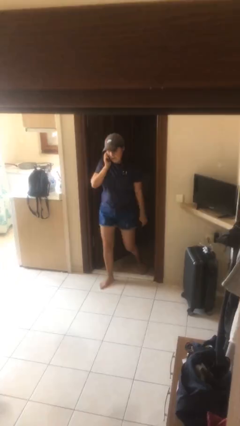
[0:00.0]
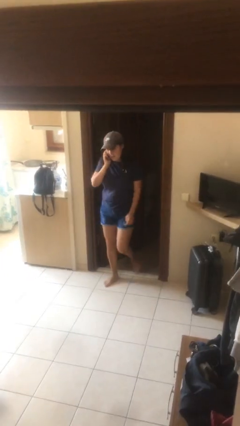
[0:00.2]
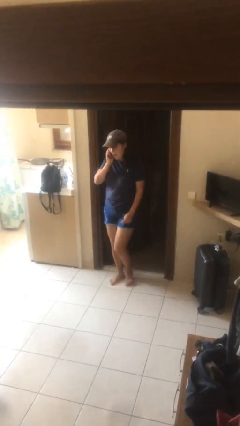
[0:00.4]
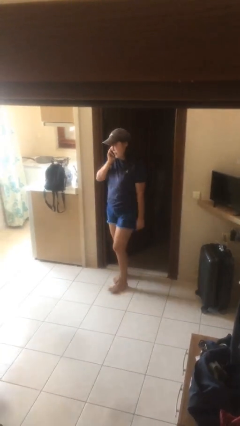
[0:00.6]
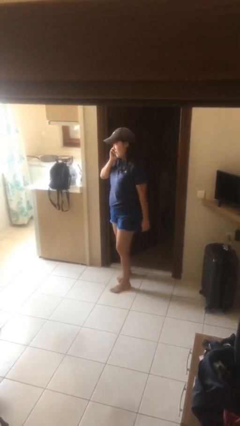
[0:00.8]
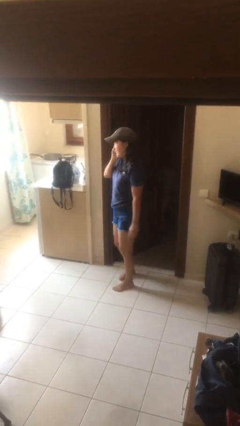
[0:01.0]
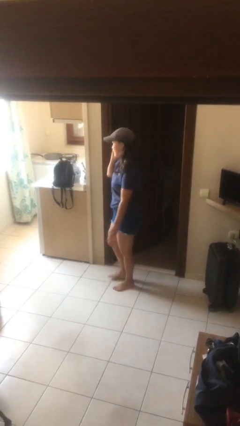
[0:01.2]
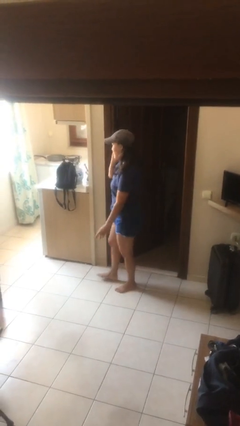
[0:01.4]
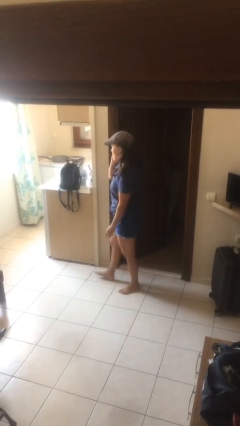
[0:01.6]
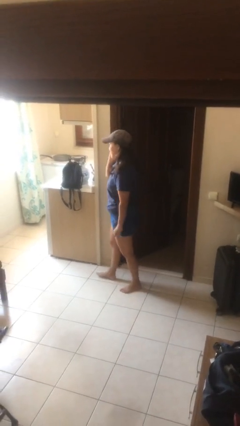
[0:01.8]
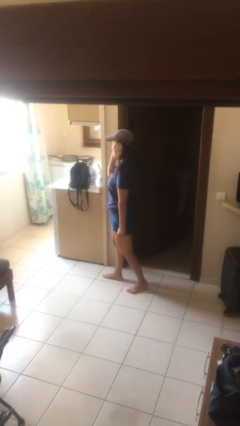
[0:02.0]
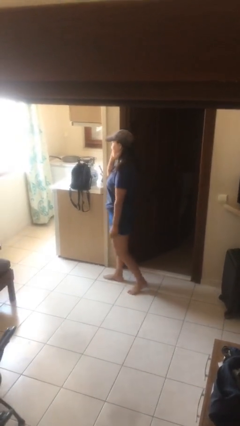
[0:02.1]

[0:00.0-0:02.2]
person enters scene through structure

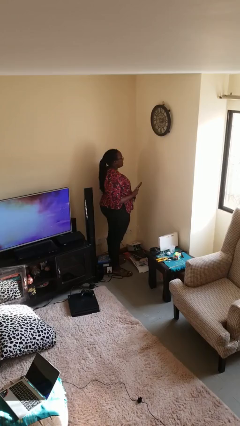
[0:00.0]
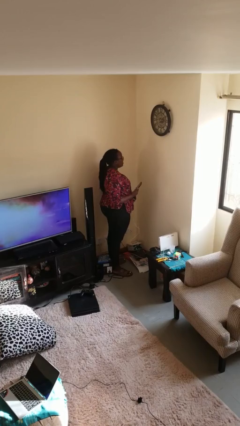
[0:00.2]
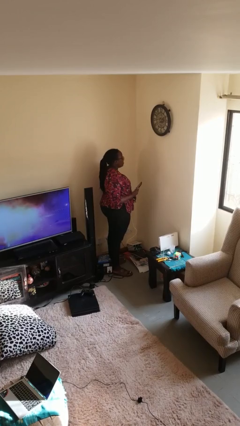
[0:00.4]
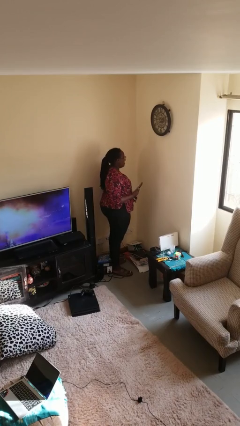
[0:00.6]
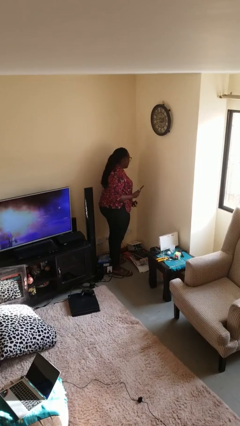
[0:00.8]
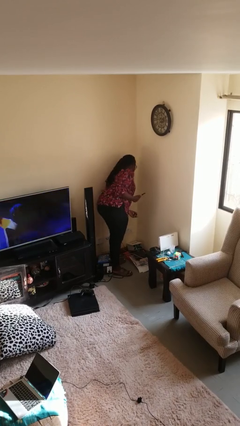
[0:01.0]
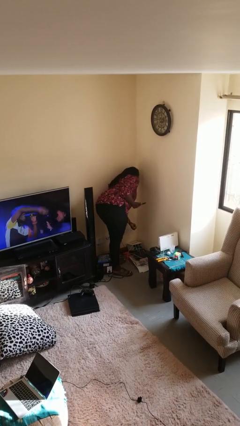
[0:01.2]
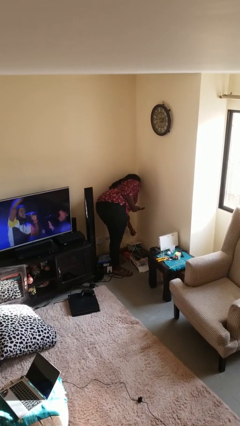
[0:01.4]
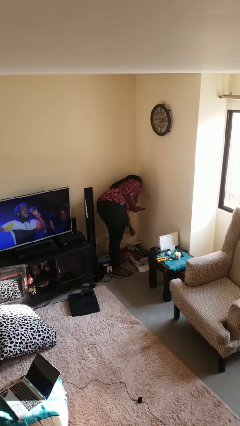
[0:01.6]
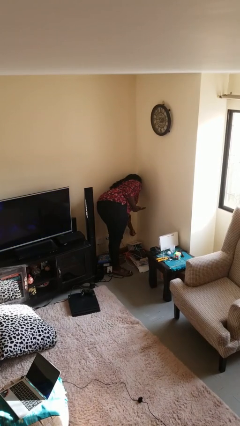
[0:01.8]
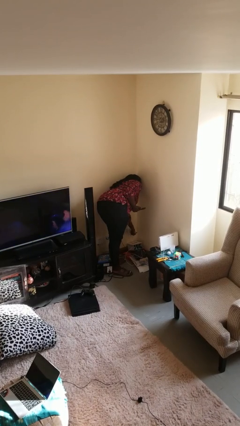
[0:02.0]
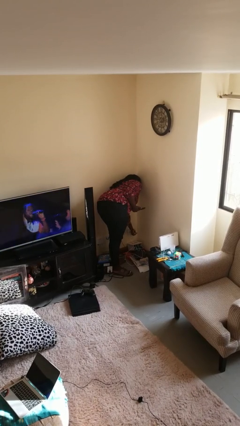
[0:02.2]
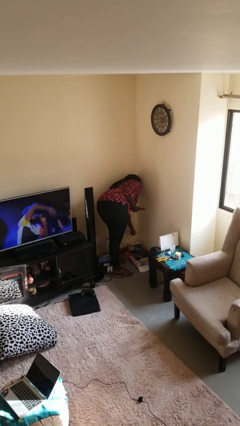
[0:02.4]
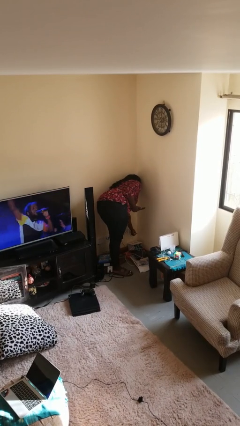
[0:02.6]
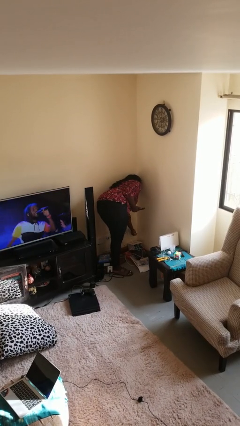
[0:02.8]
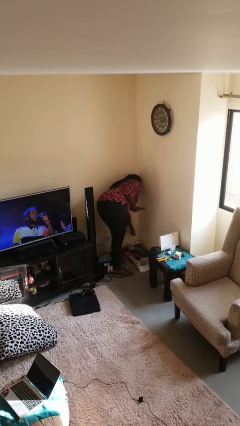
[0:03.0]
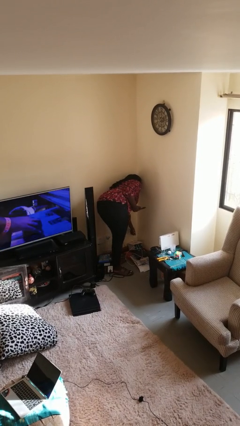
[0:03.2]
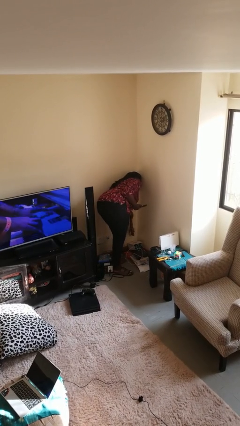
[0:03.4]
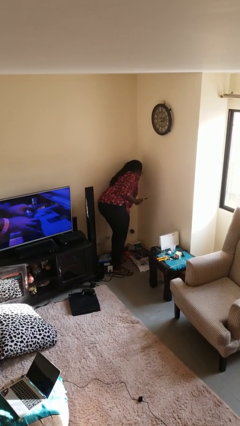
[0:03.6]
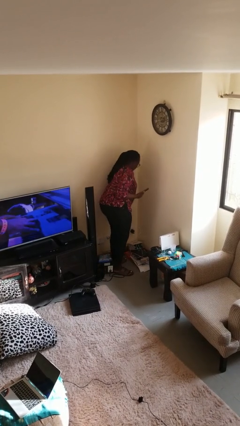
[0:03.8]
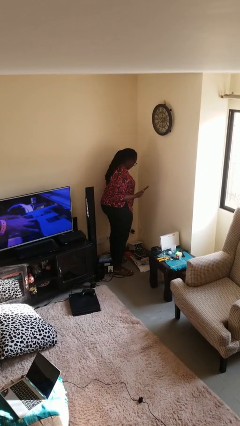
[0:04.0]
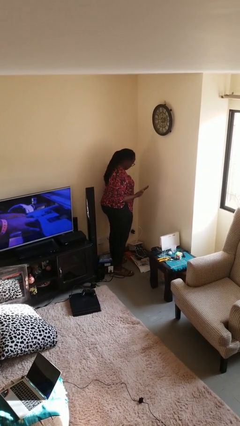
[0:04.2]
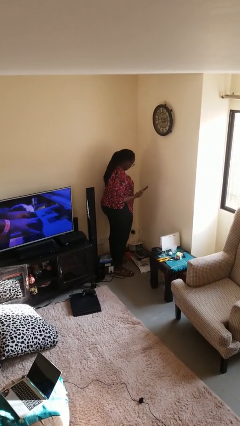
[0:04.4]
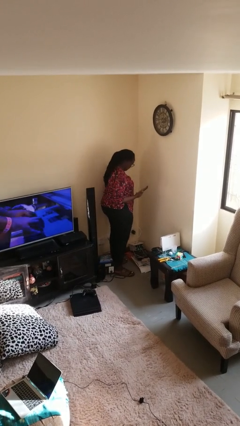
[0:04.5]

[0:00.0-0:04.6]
person plugs into electrical socket

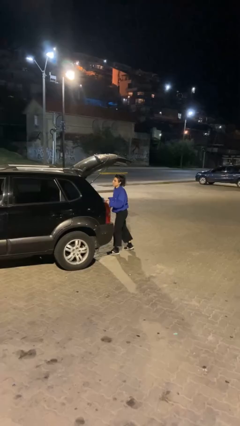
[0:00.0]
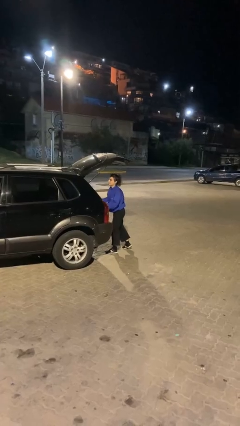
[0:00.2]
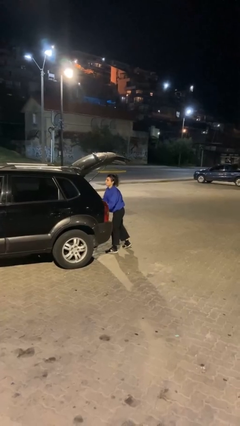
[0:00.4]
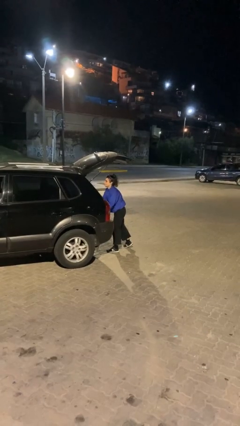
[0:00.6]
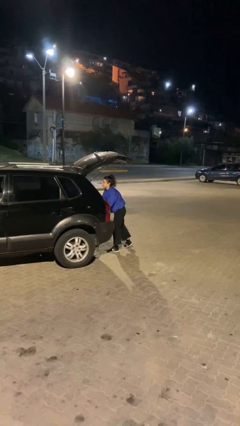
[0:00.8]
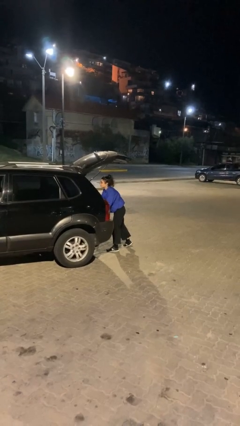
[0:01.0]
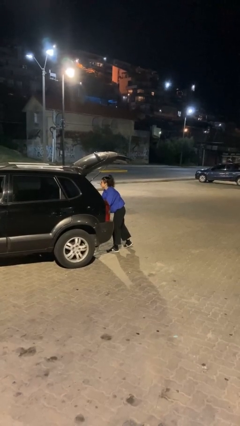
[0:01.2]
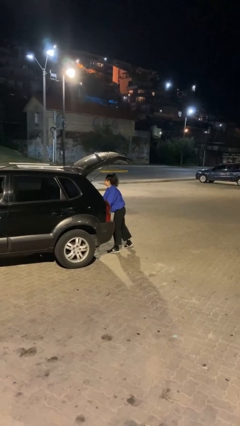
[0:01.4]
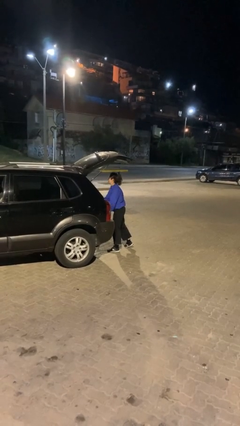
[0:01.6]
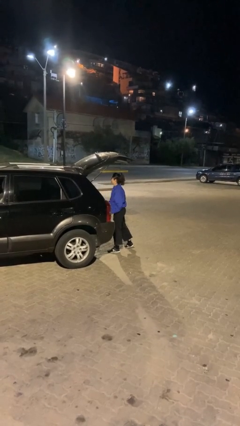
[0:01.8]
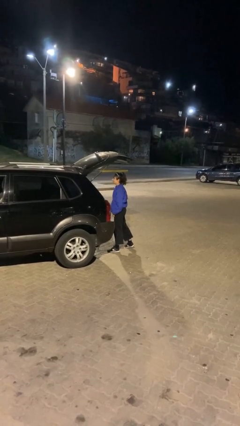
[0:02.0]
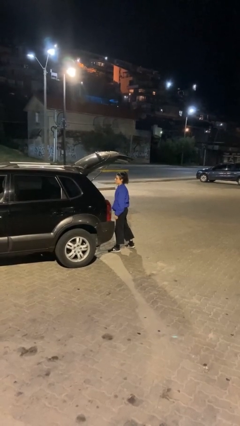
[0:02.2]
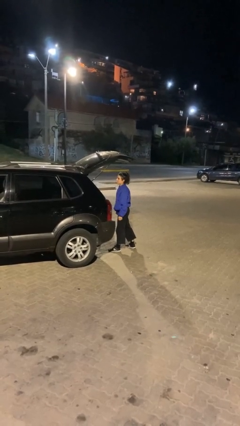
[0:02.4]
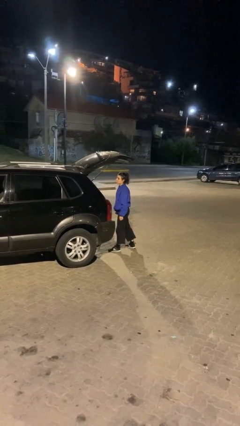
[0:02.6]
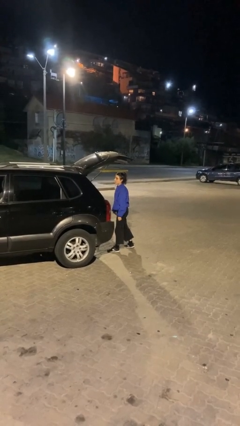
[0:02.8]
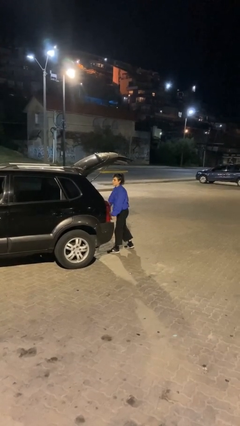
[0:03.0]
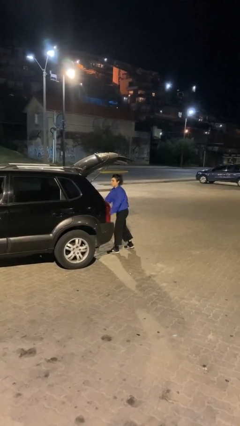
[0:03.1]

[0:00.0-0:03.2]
person loads car

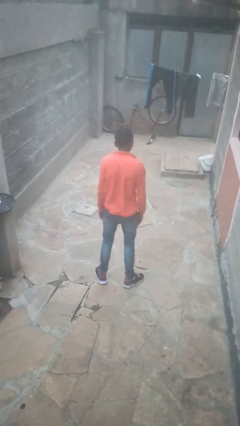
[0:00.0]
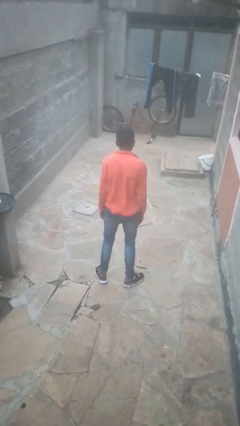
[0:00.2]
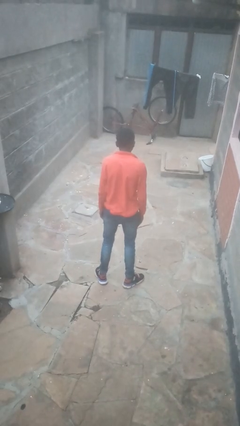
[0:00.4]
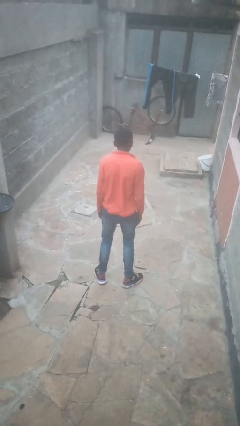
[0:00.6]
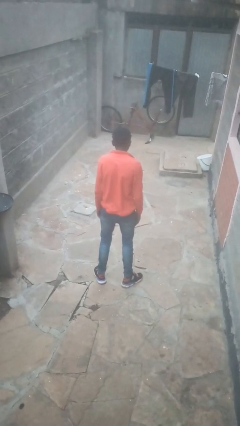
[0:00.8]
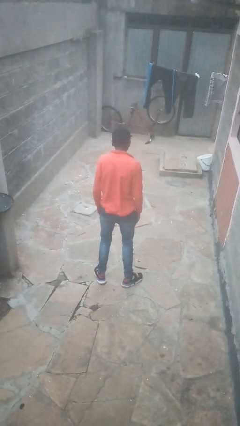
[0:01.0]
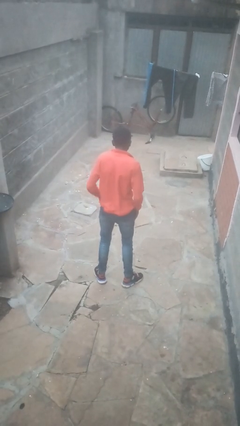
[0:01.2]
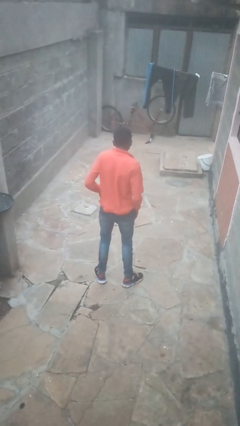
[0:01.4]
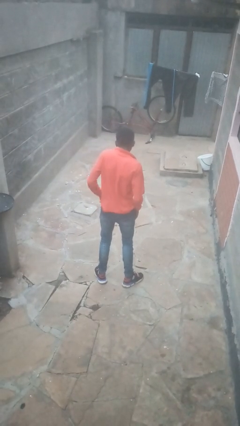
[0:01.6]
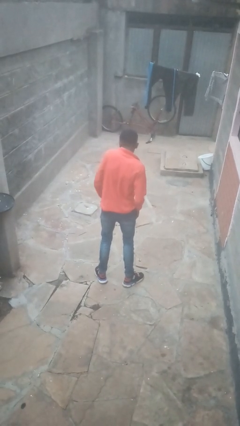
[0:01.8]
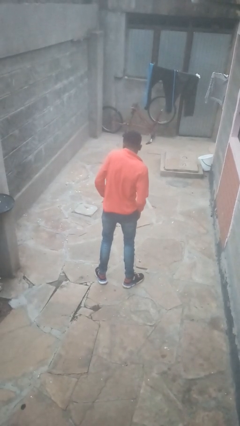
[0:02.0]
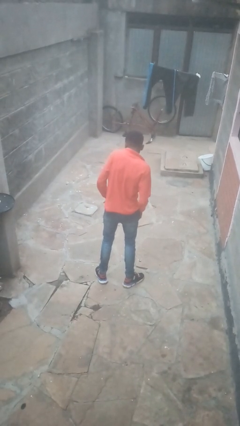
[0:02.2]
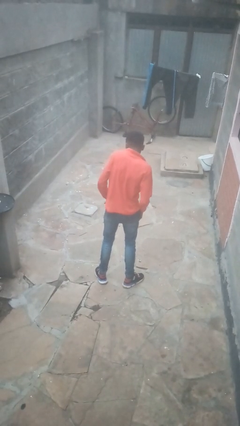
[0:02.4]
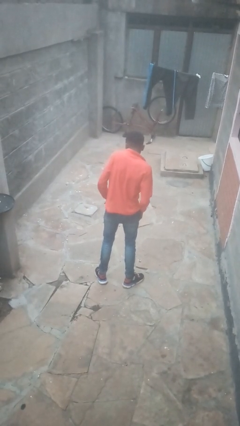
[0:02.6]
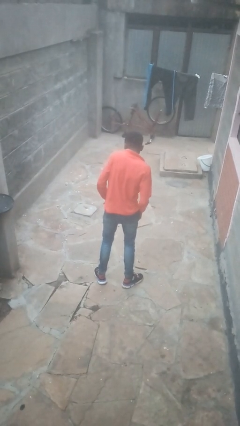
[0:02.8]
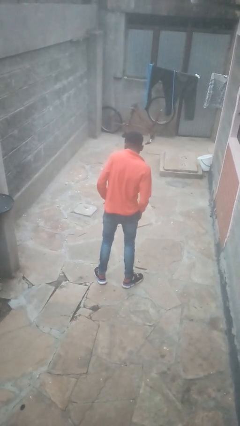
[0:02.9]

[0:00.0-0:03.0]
person puts hands in back pockets

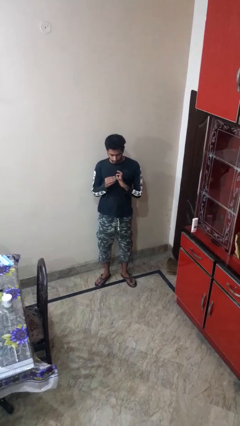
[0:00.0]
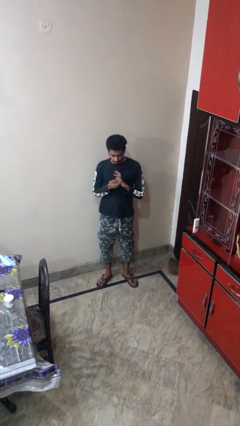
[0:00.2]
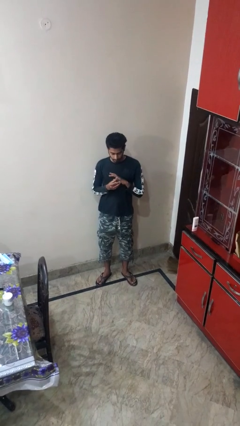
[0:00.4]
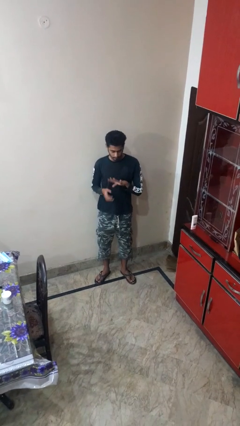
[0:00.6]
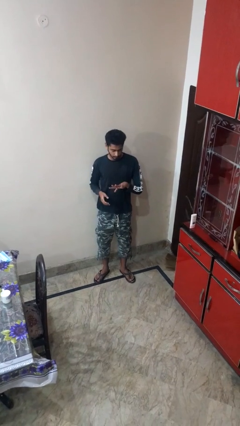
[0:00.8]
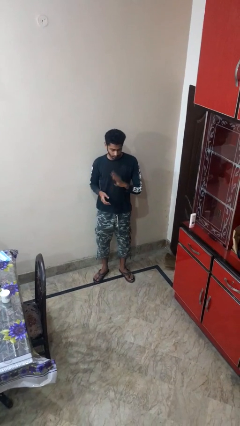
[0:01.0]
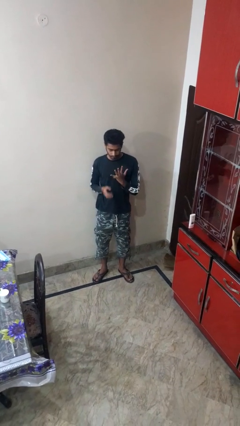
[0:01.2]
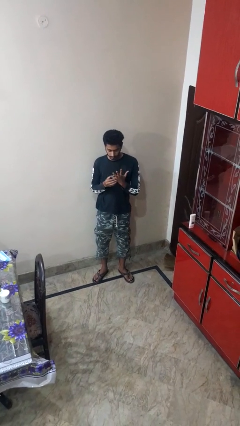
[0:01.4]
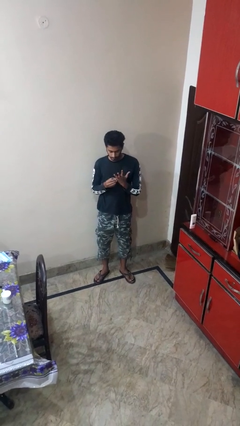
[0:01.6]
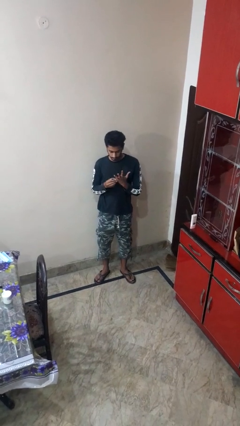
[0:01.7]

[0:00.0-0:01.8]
person puts on ring

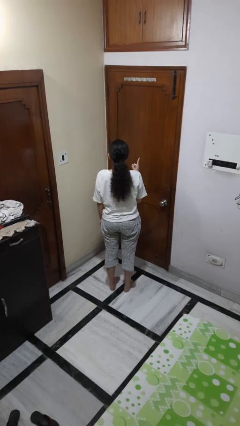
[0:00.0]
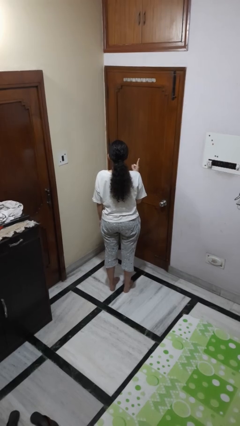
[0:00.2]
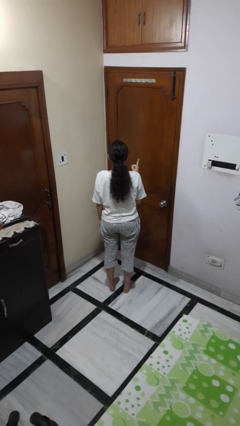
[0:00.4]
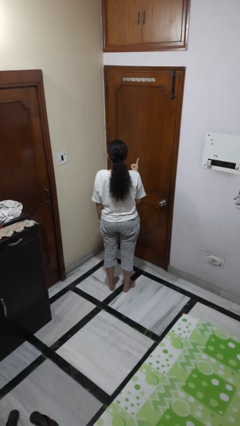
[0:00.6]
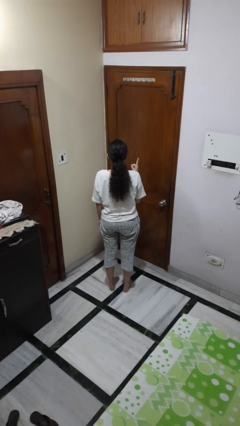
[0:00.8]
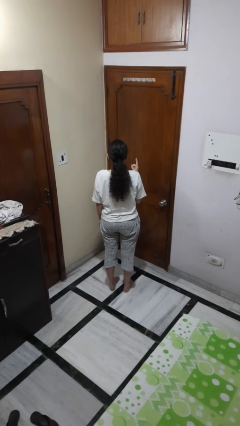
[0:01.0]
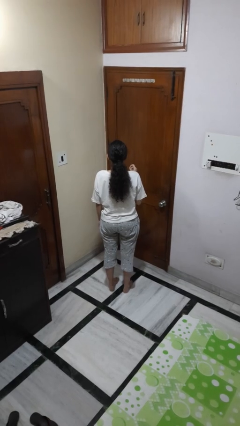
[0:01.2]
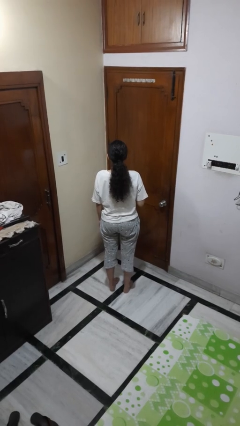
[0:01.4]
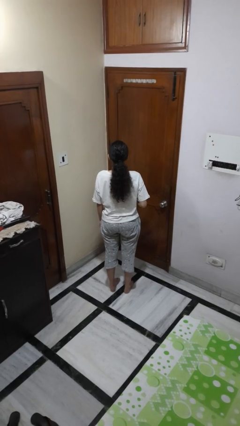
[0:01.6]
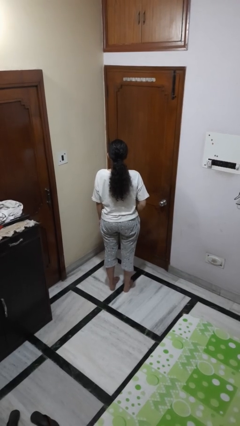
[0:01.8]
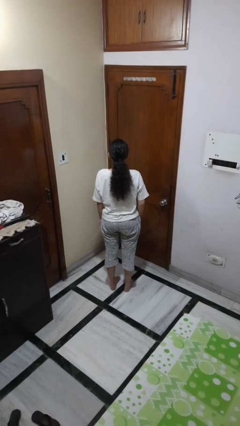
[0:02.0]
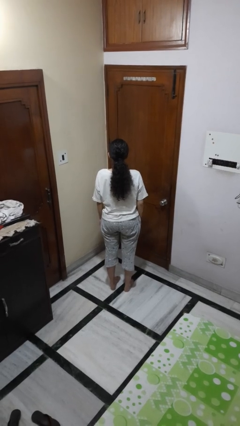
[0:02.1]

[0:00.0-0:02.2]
person gestures number one
